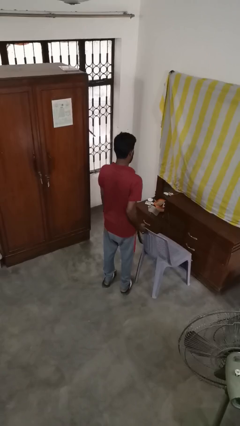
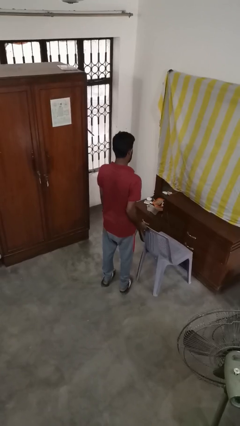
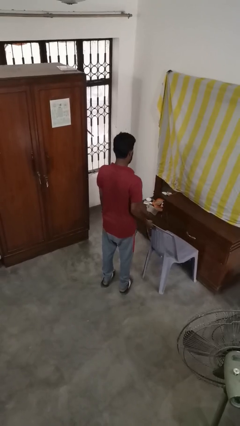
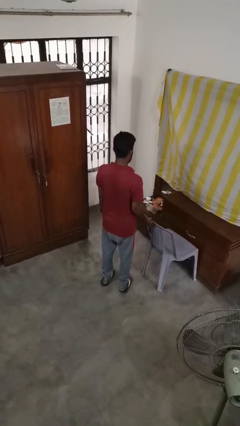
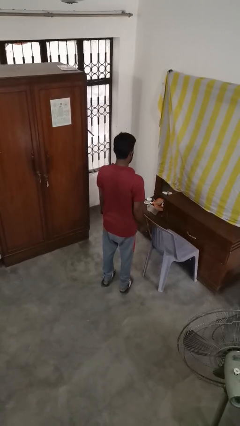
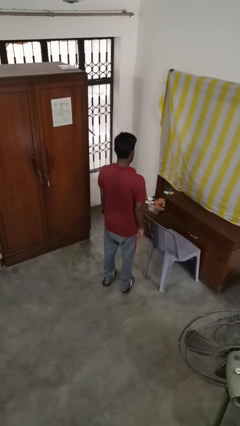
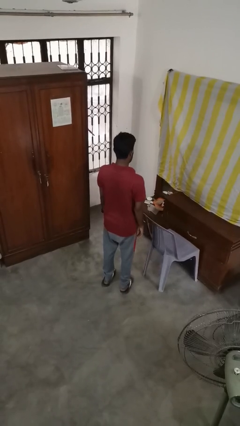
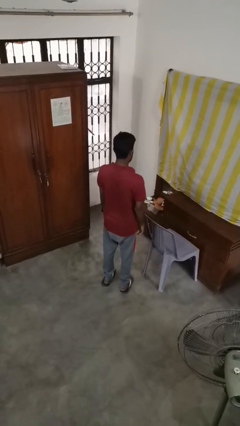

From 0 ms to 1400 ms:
person pushes in chair

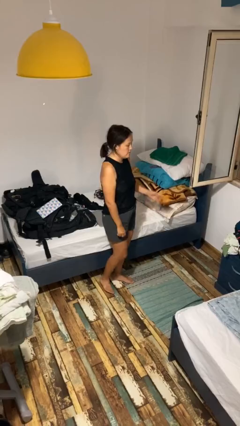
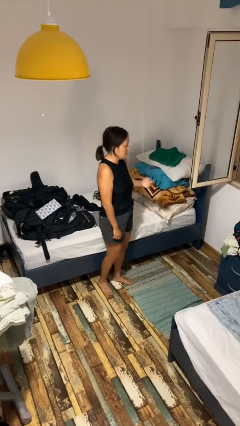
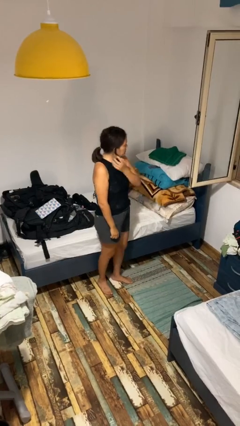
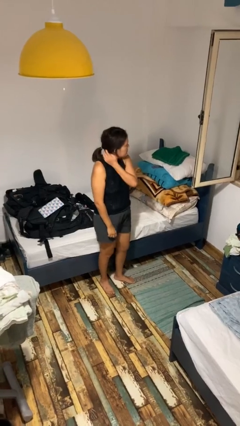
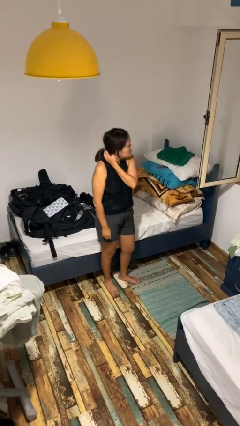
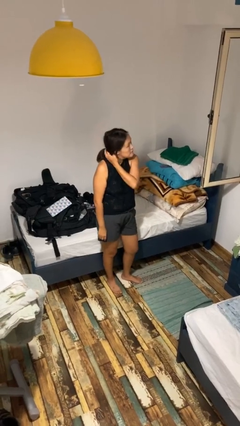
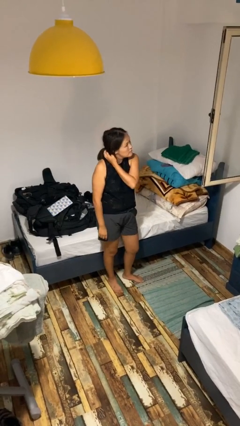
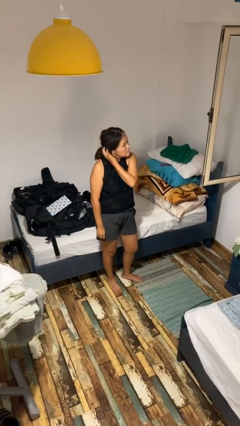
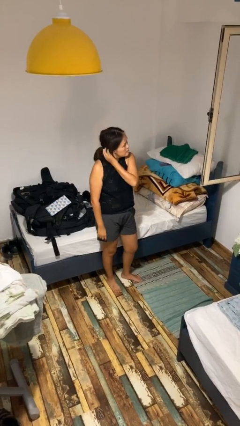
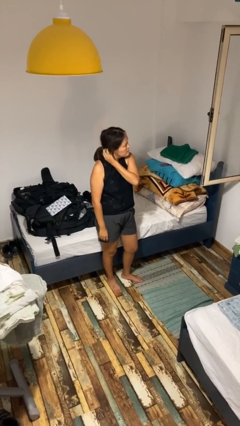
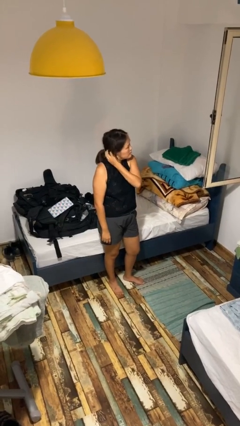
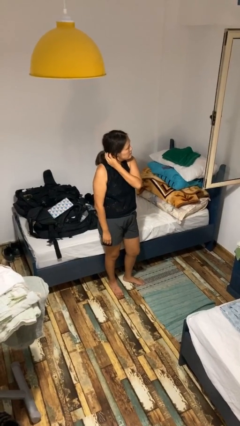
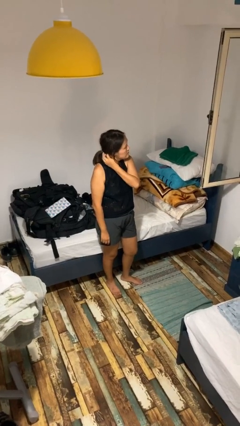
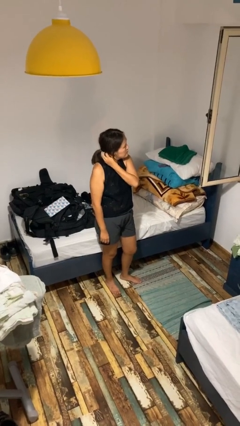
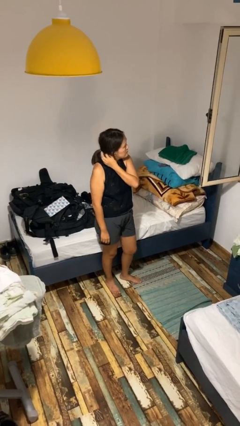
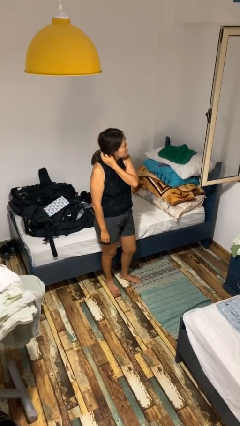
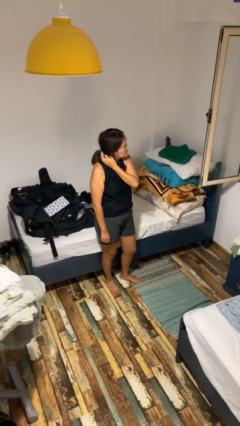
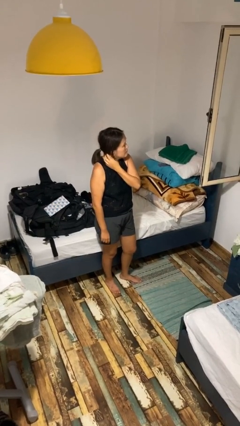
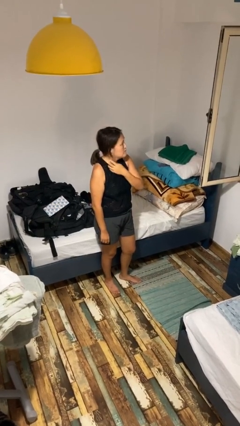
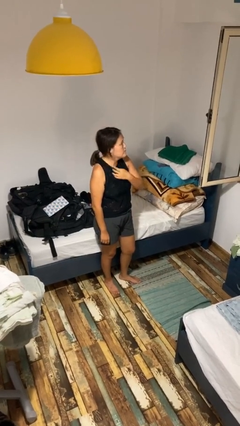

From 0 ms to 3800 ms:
person scratches face

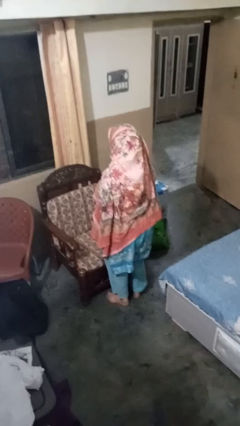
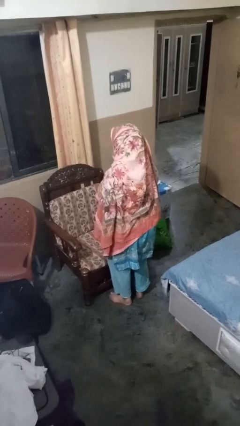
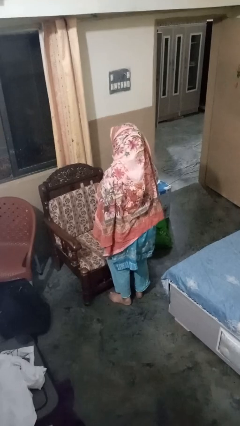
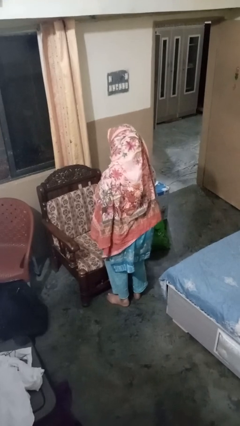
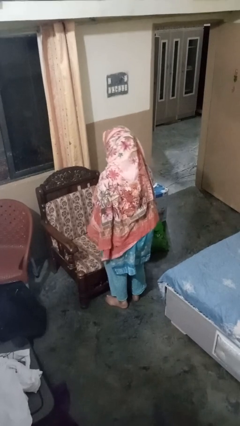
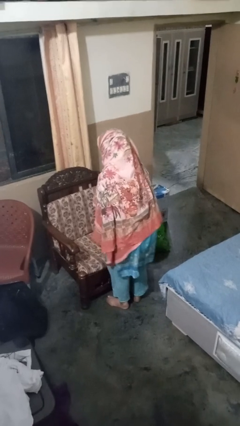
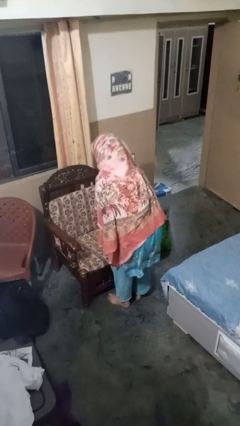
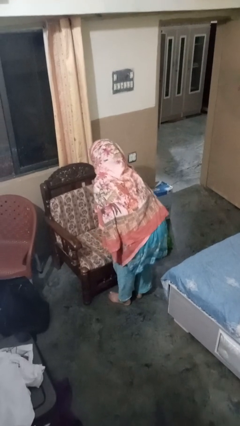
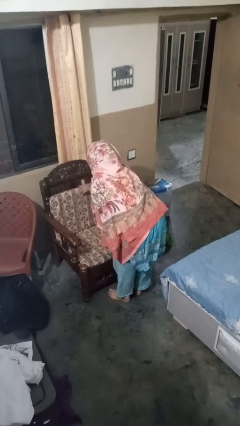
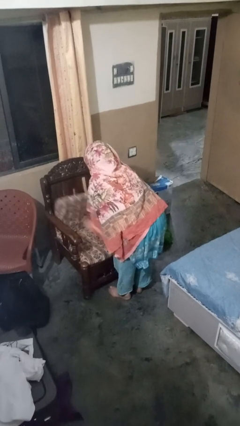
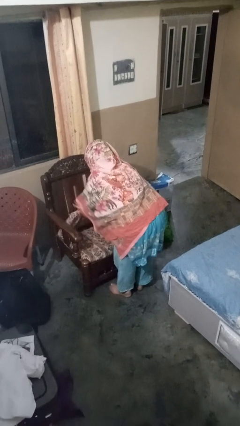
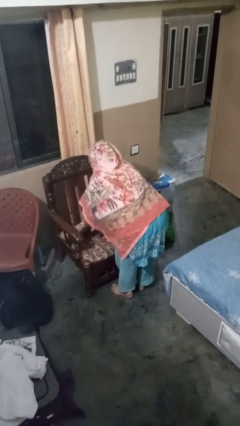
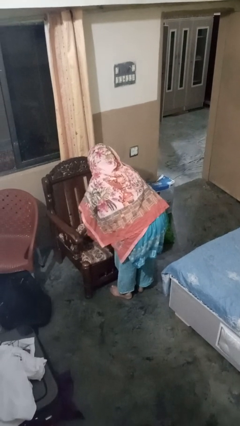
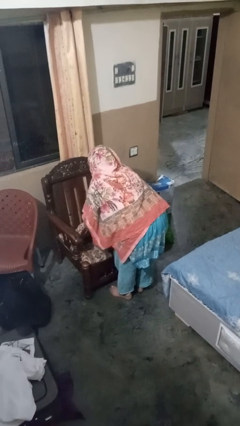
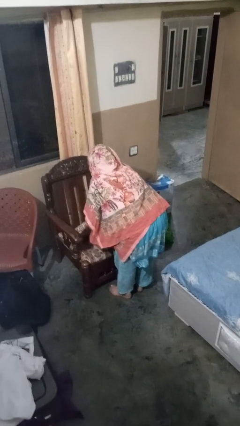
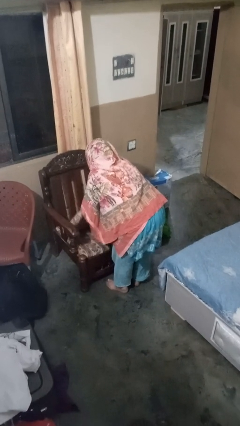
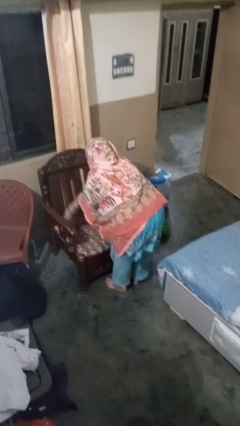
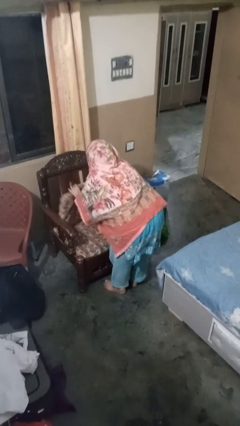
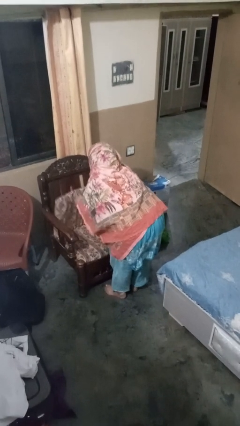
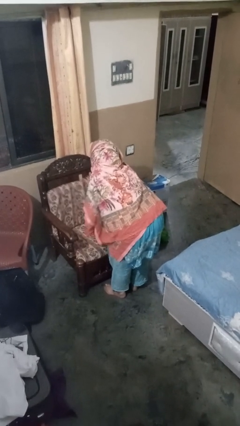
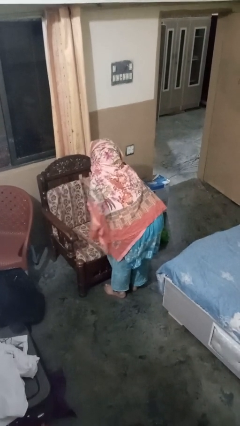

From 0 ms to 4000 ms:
person searches in couch

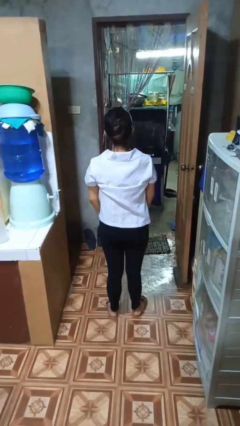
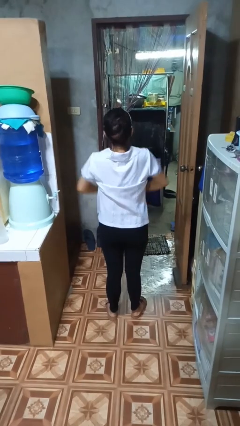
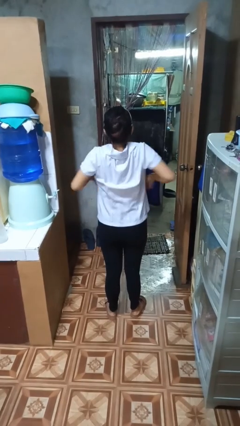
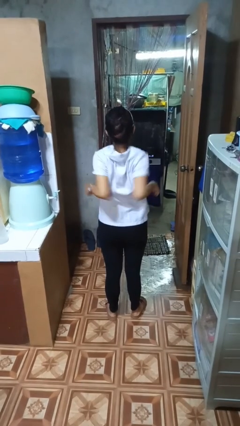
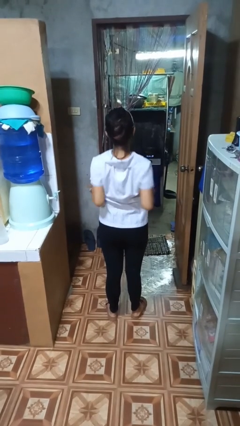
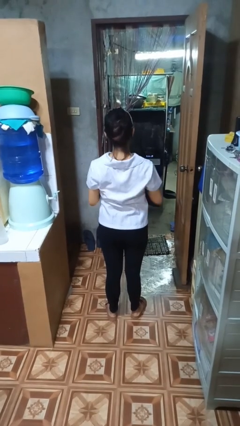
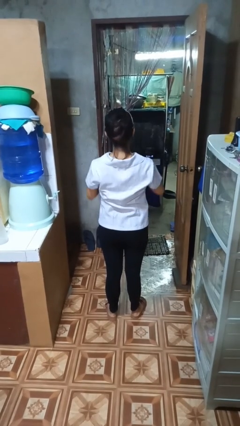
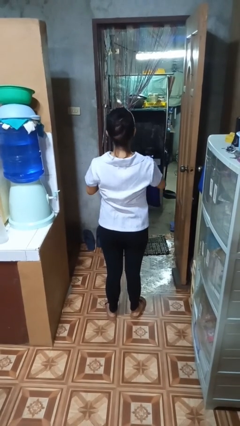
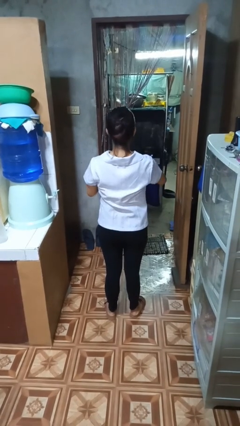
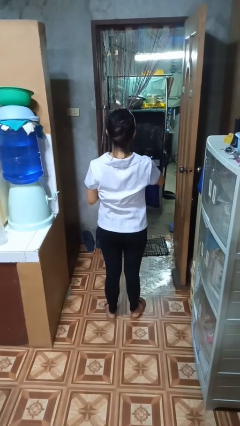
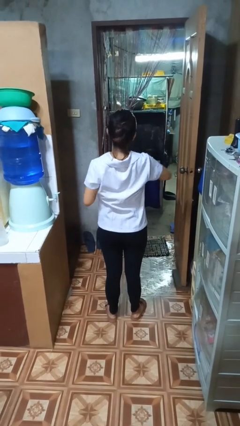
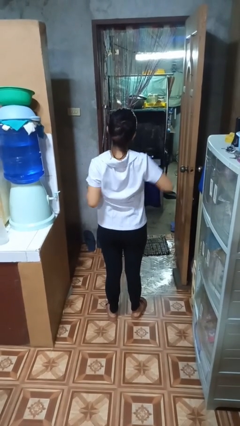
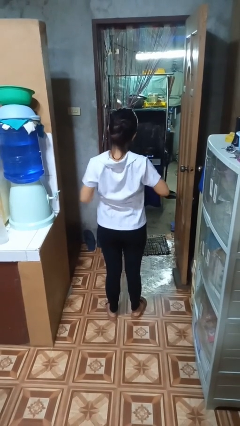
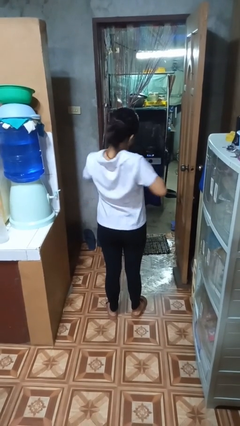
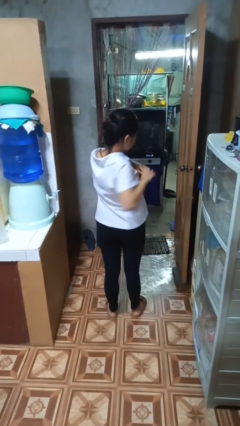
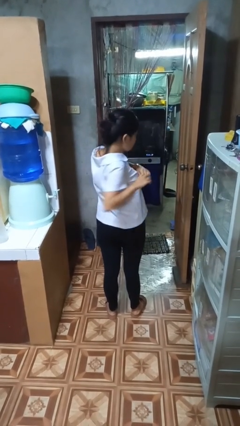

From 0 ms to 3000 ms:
person stretches back

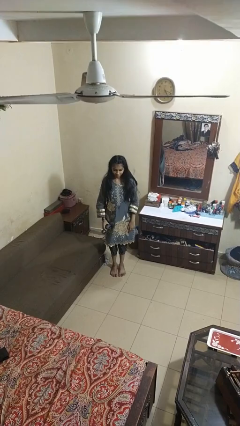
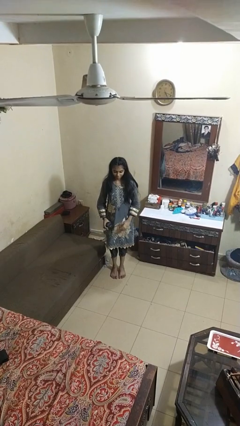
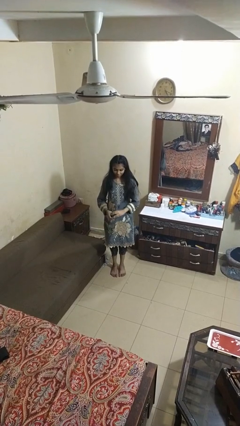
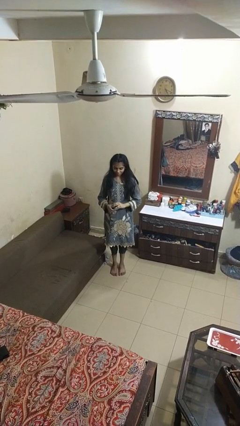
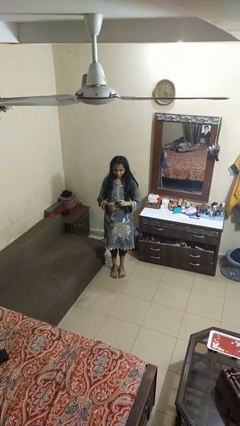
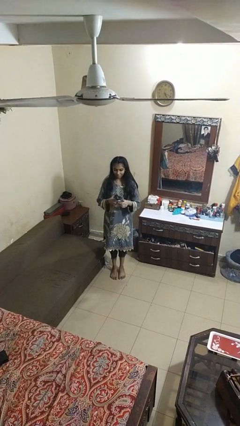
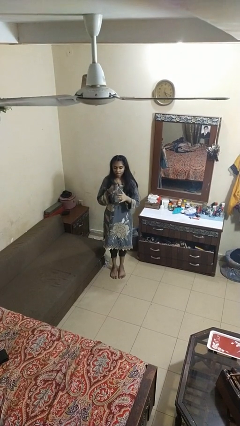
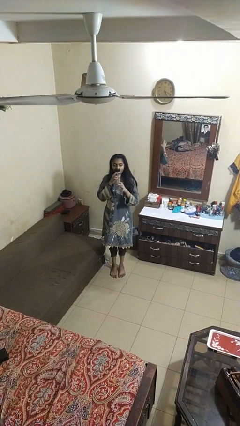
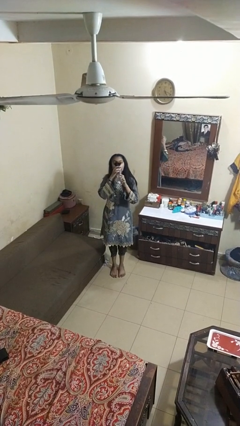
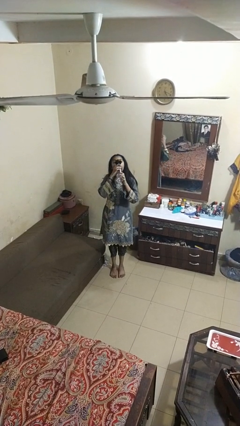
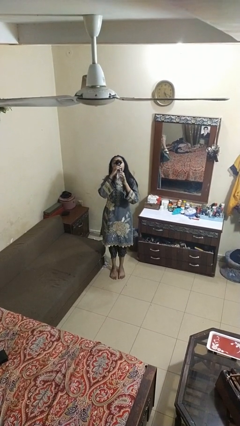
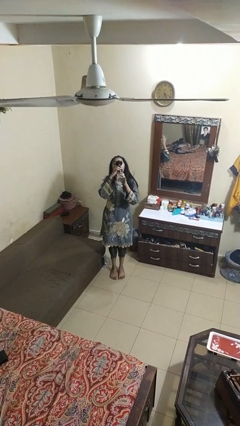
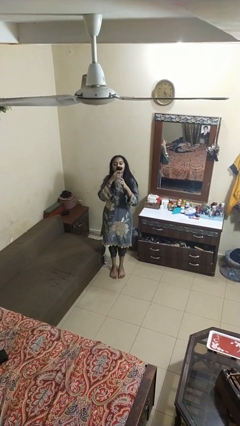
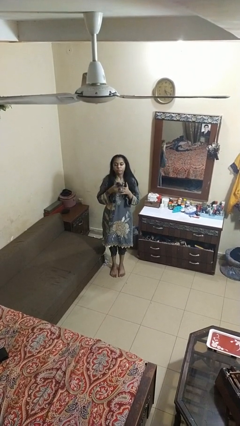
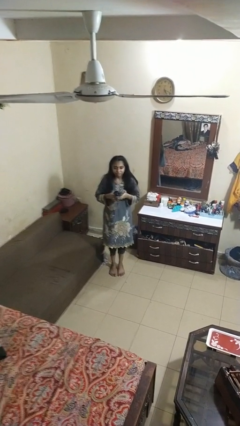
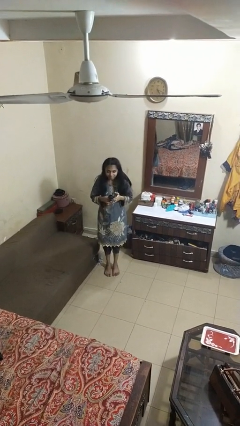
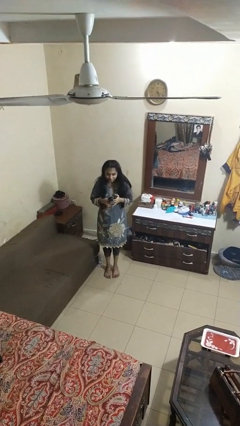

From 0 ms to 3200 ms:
person drinks from bottle

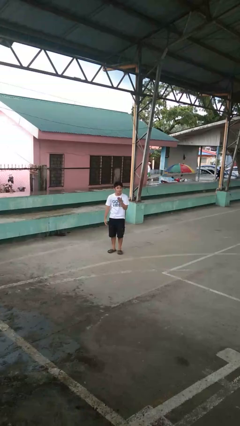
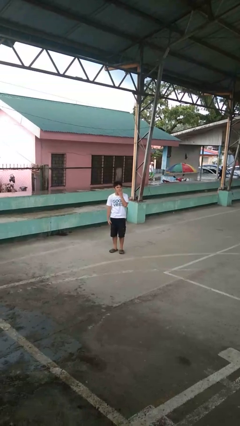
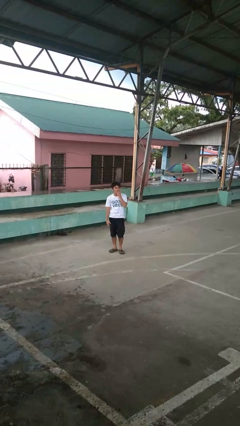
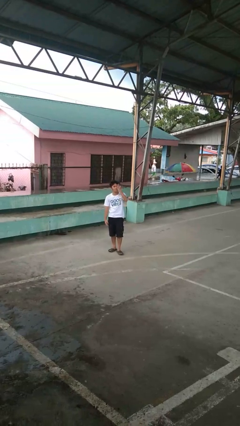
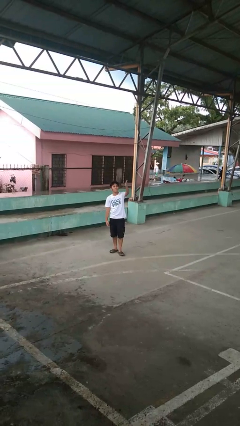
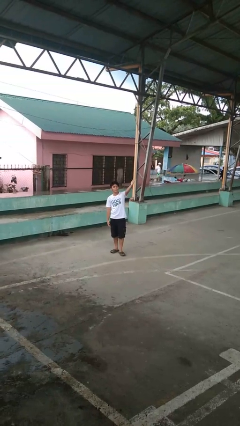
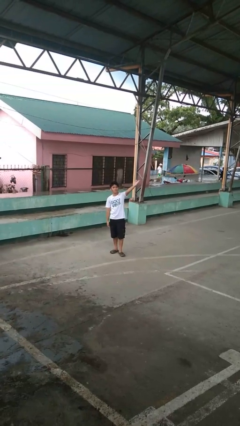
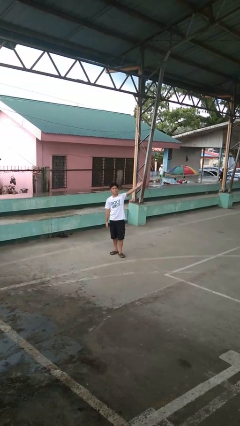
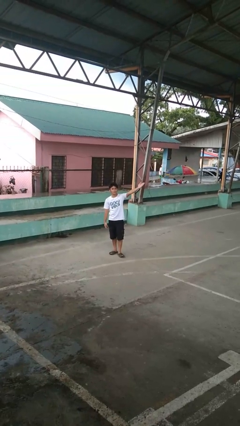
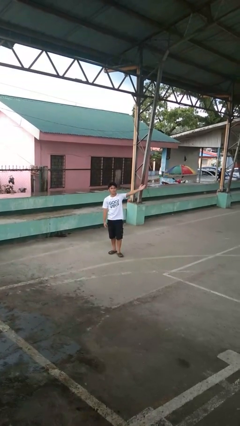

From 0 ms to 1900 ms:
person gestures blow kiss

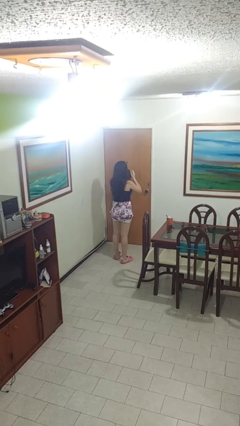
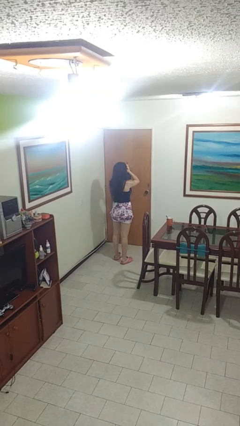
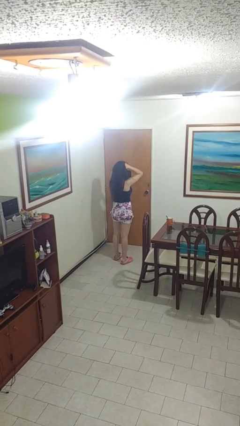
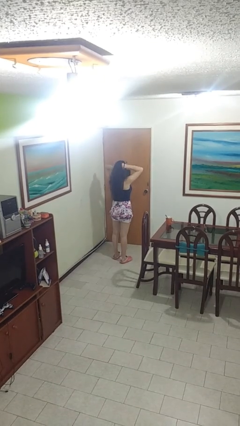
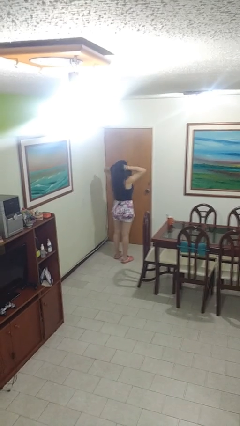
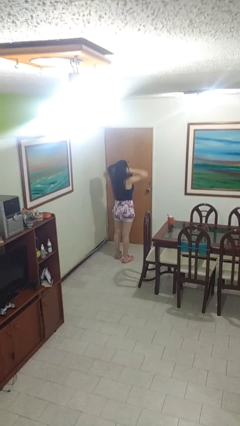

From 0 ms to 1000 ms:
person strokes hair
